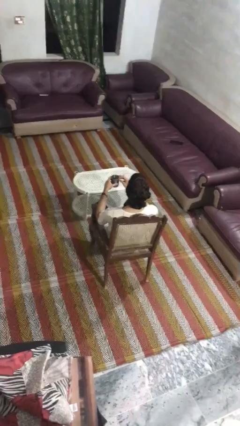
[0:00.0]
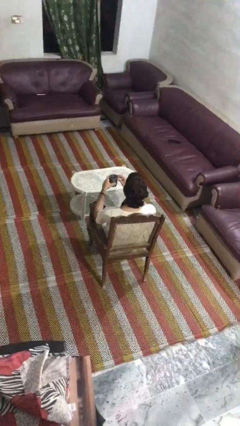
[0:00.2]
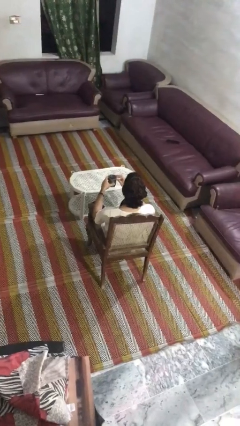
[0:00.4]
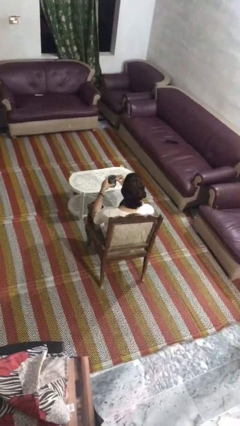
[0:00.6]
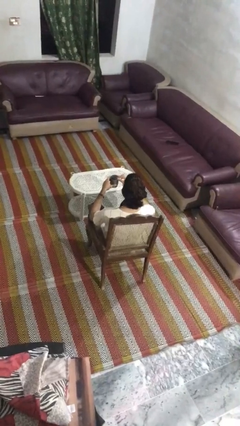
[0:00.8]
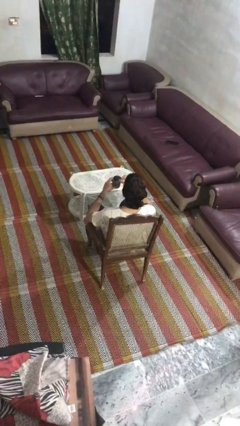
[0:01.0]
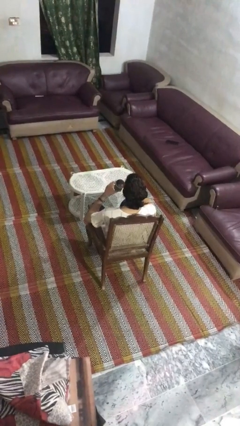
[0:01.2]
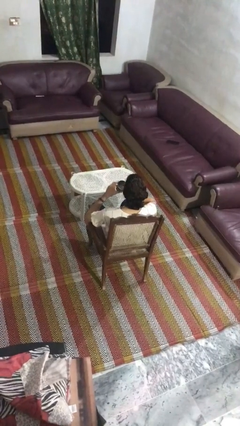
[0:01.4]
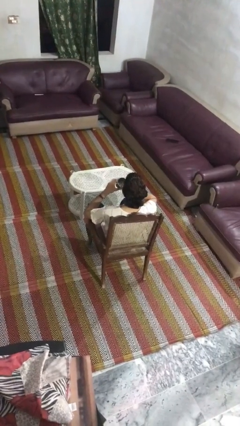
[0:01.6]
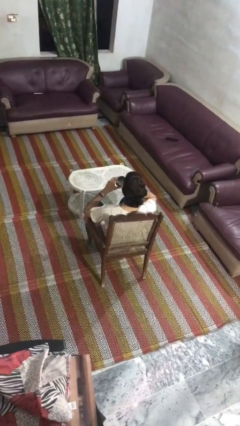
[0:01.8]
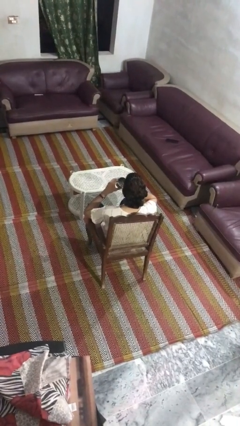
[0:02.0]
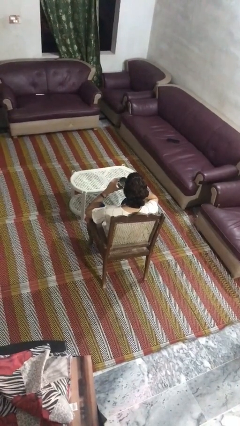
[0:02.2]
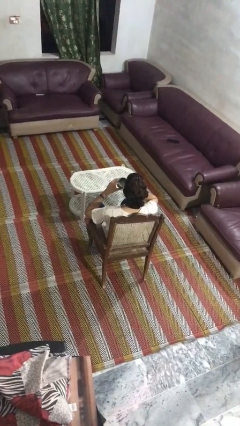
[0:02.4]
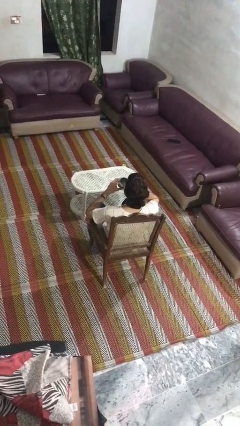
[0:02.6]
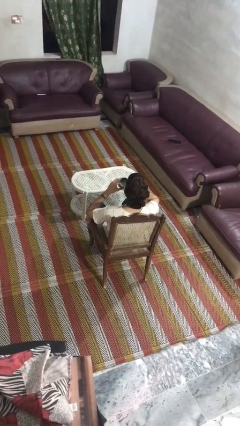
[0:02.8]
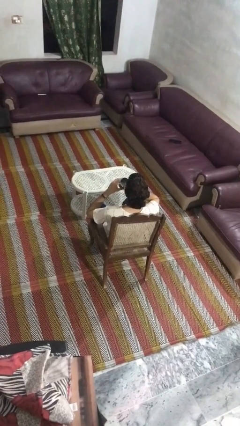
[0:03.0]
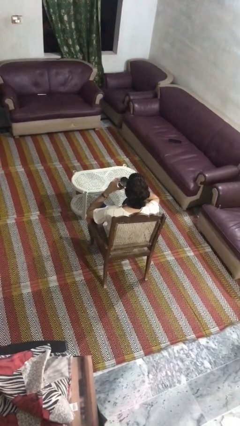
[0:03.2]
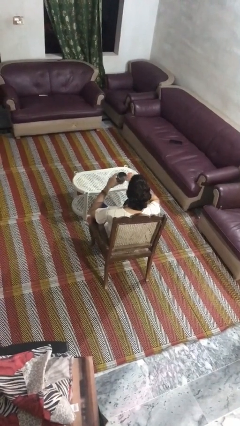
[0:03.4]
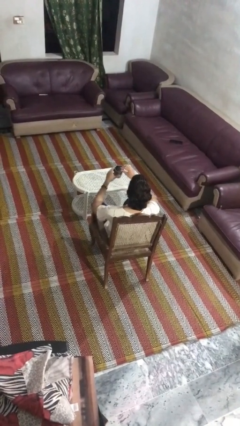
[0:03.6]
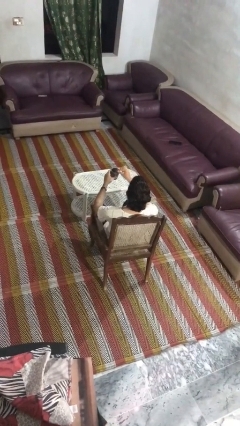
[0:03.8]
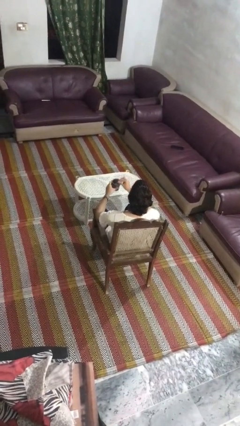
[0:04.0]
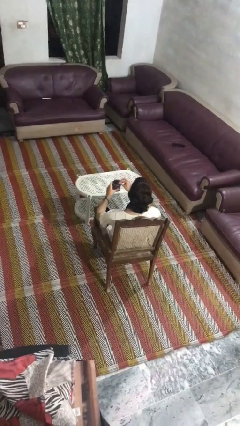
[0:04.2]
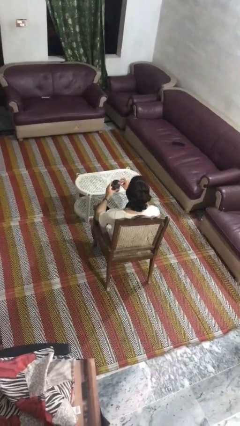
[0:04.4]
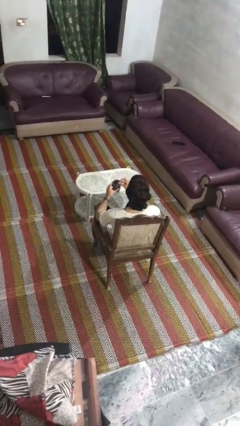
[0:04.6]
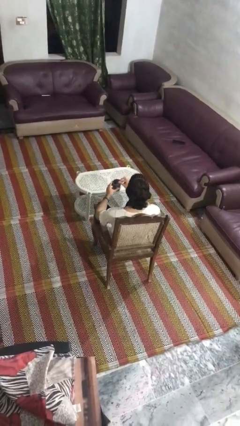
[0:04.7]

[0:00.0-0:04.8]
person drinks from straw

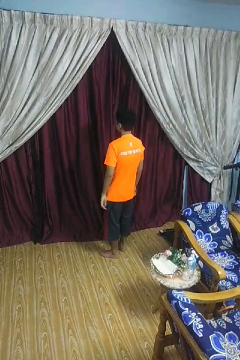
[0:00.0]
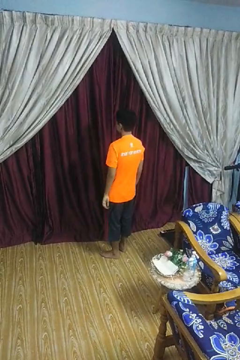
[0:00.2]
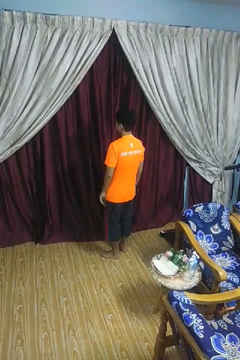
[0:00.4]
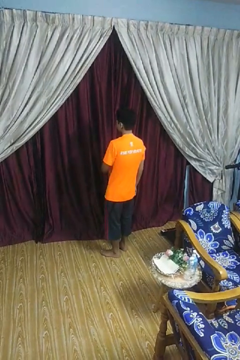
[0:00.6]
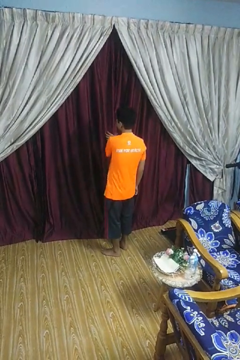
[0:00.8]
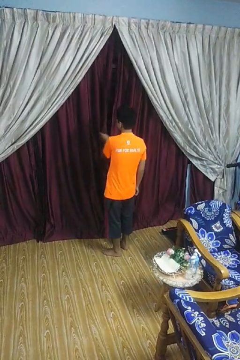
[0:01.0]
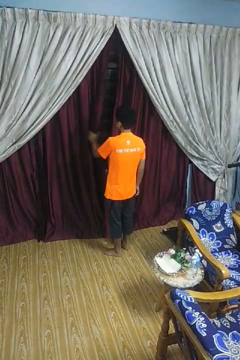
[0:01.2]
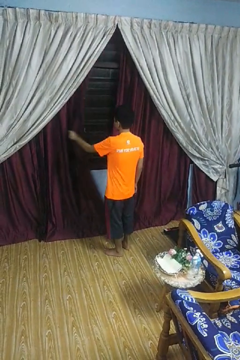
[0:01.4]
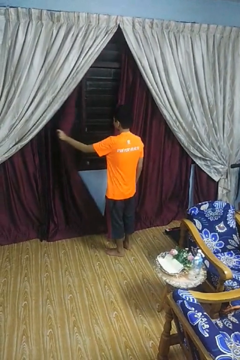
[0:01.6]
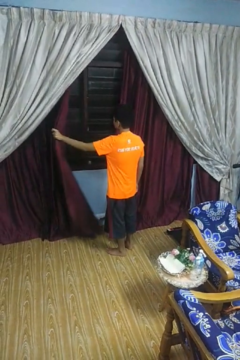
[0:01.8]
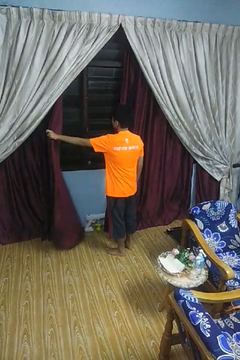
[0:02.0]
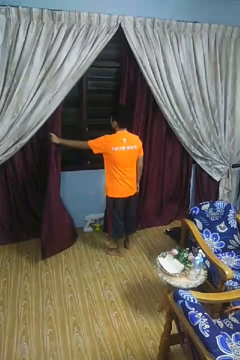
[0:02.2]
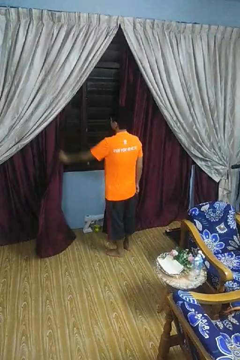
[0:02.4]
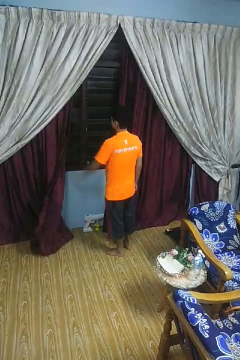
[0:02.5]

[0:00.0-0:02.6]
person opens curtains

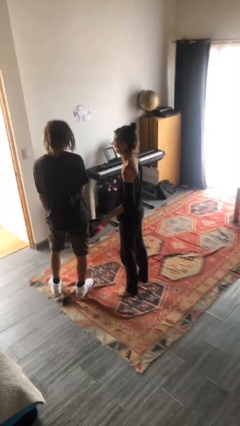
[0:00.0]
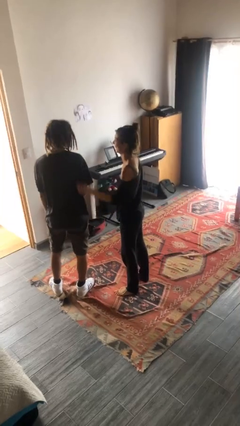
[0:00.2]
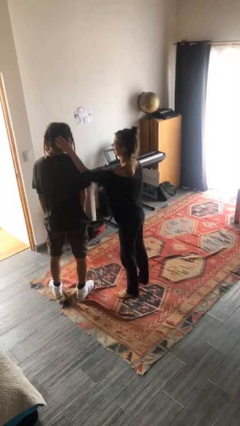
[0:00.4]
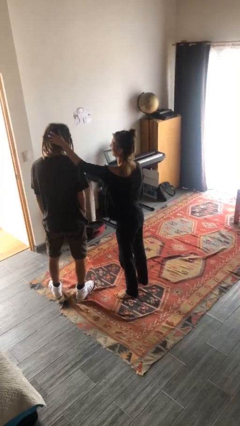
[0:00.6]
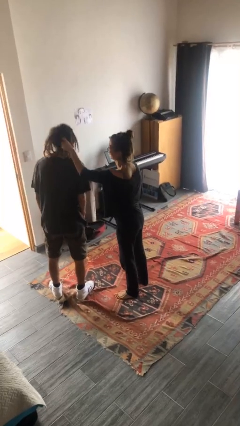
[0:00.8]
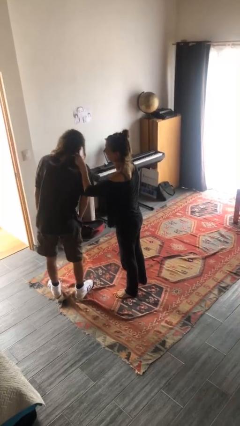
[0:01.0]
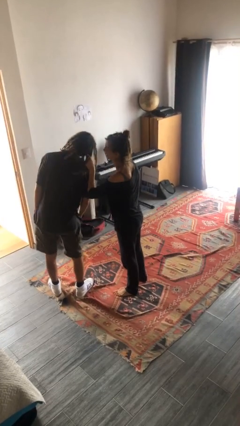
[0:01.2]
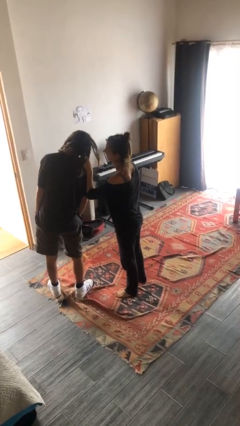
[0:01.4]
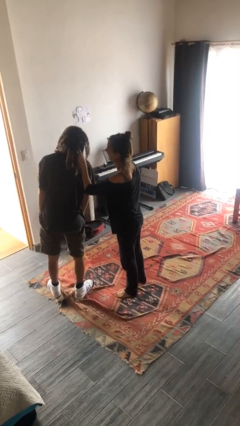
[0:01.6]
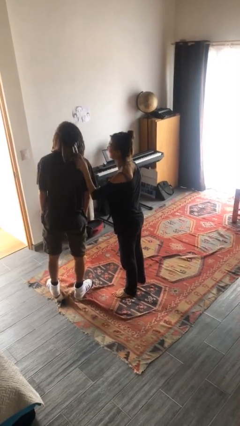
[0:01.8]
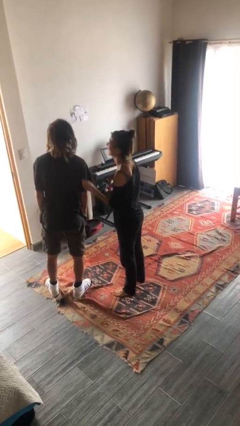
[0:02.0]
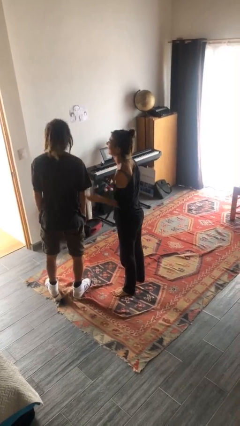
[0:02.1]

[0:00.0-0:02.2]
person grabs person by hair

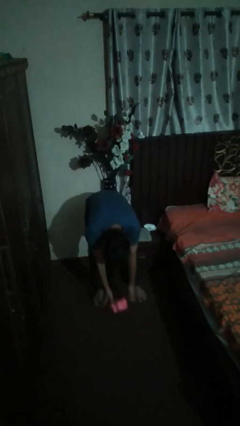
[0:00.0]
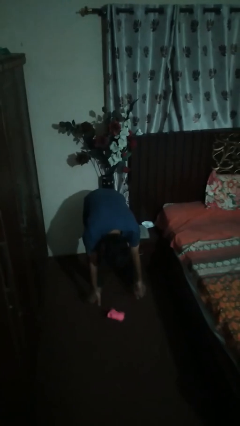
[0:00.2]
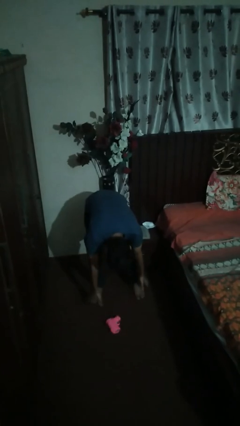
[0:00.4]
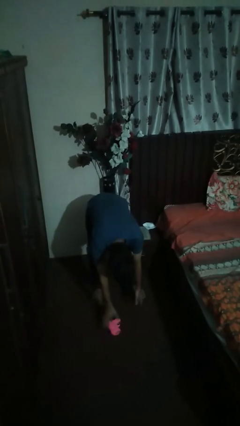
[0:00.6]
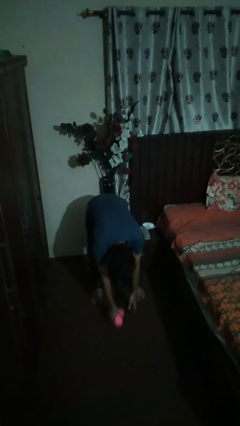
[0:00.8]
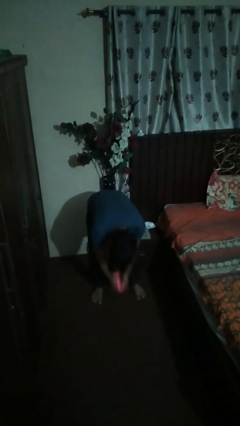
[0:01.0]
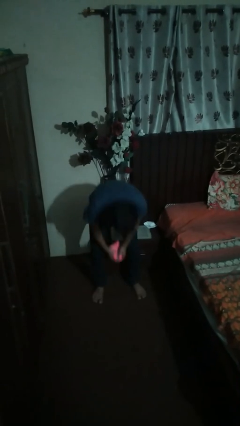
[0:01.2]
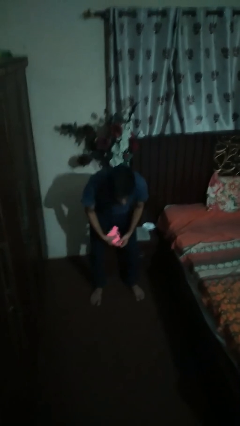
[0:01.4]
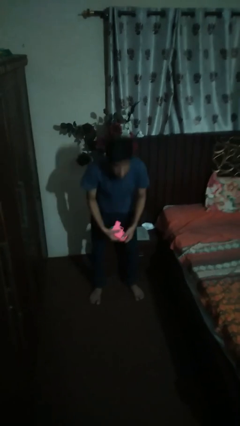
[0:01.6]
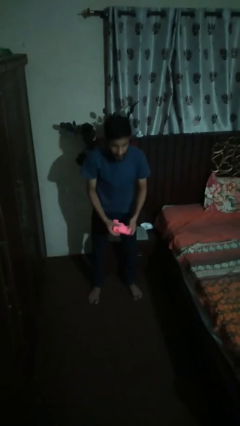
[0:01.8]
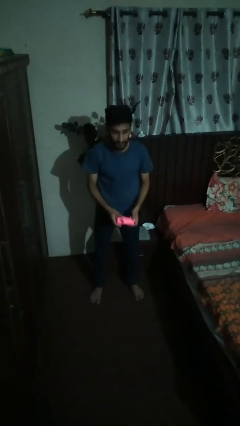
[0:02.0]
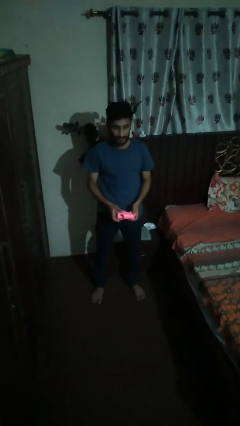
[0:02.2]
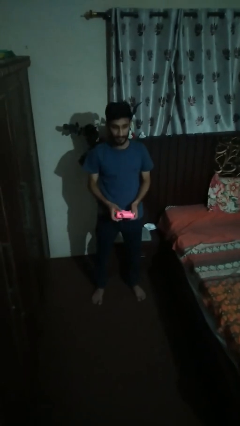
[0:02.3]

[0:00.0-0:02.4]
person picks up object from floor

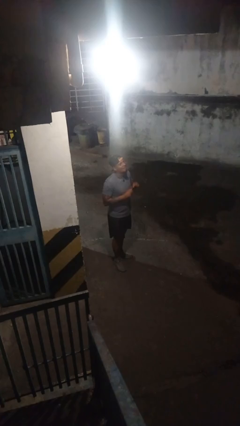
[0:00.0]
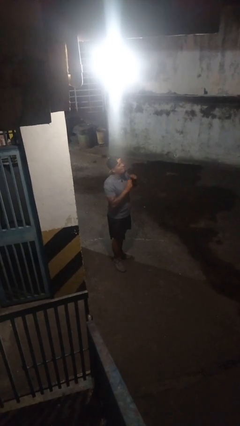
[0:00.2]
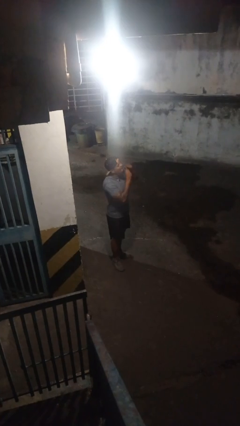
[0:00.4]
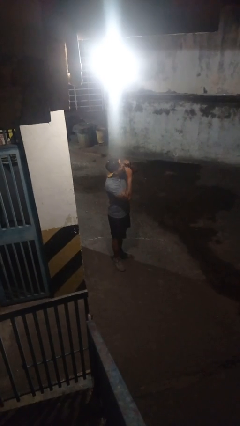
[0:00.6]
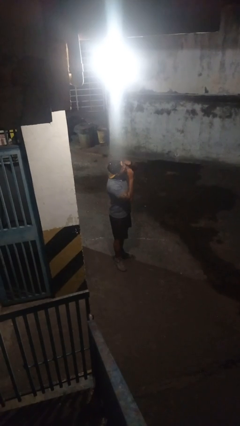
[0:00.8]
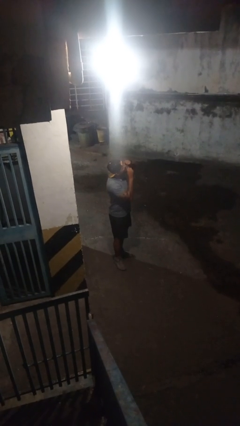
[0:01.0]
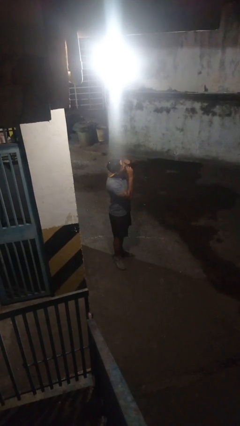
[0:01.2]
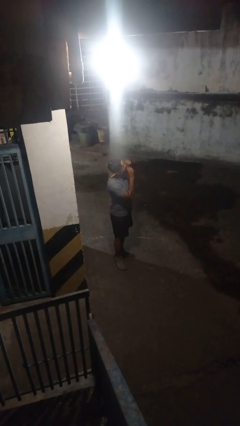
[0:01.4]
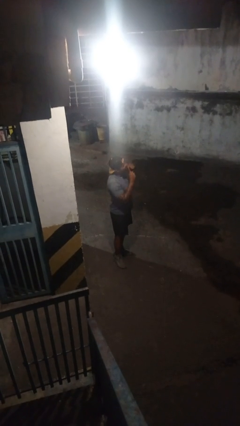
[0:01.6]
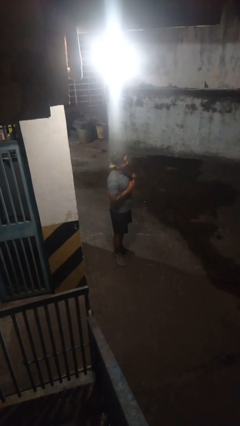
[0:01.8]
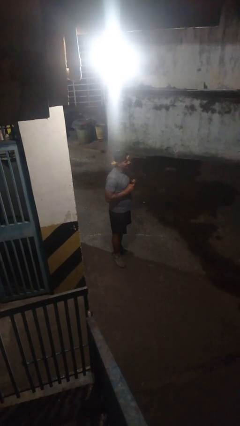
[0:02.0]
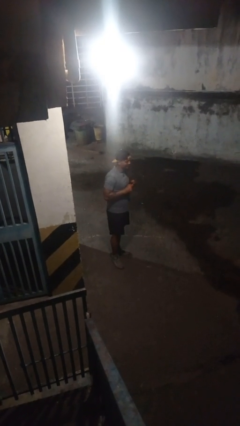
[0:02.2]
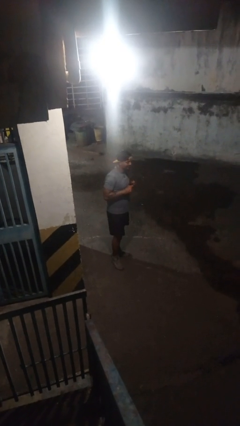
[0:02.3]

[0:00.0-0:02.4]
person flosses

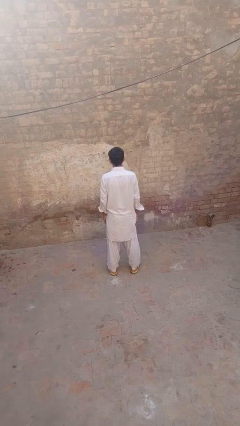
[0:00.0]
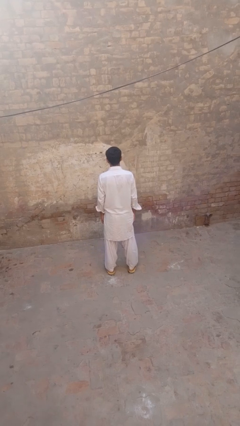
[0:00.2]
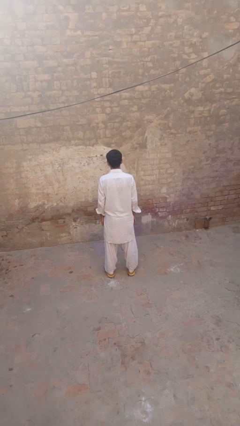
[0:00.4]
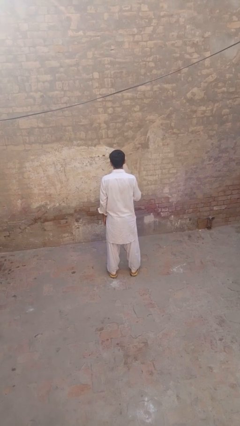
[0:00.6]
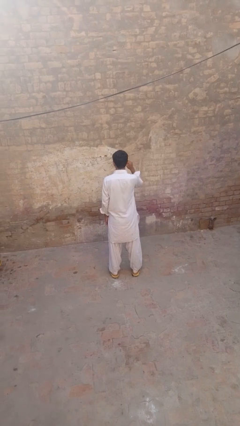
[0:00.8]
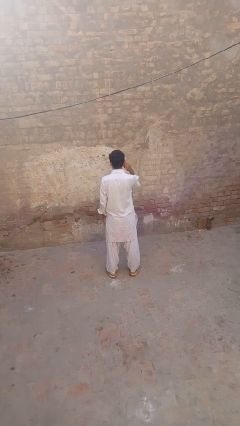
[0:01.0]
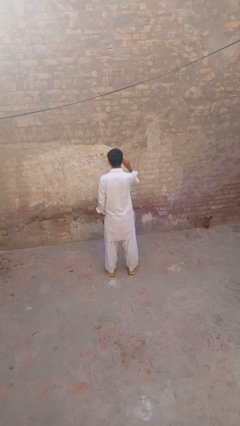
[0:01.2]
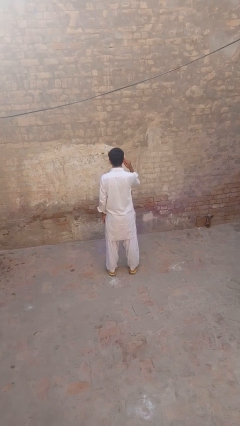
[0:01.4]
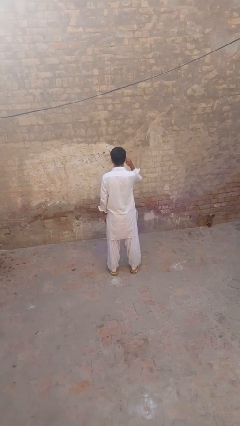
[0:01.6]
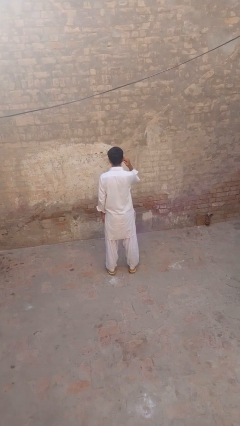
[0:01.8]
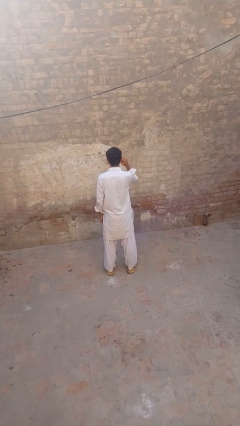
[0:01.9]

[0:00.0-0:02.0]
person touches earlobe

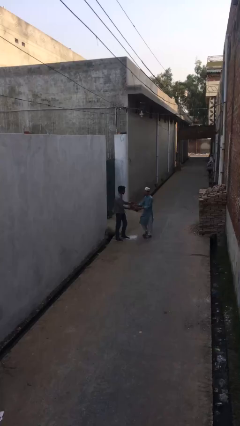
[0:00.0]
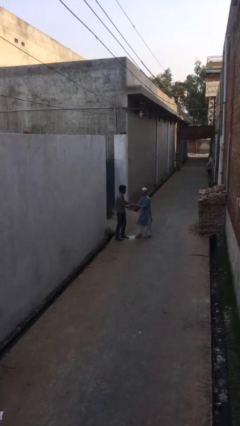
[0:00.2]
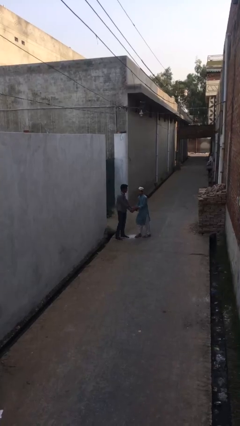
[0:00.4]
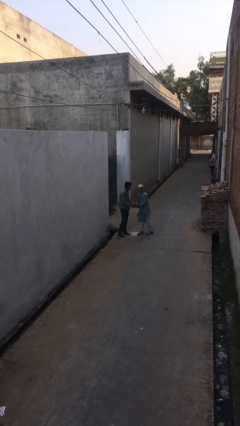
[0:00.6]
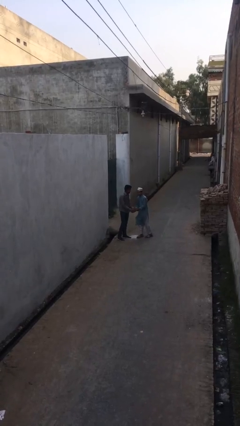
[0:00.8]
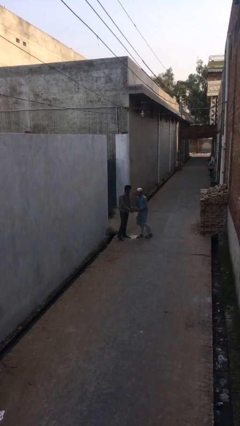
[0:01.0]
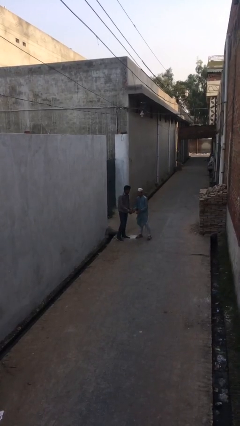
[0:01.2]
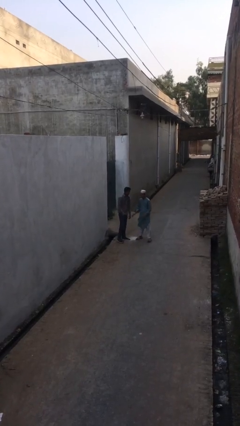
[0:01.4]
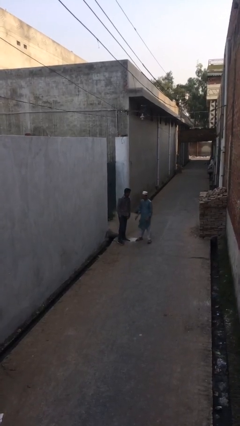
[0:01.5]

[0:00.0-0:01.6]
person shakes hand
